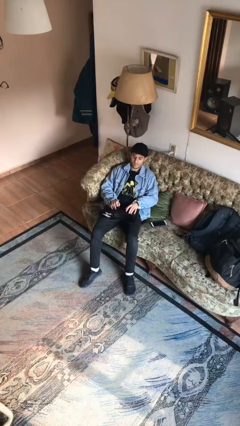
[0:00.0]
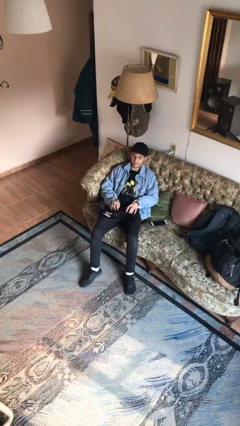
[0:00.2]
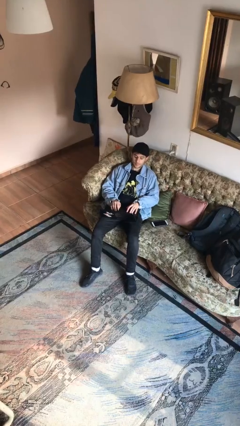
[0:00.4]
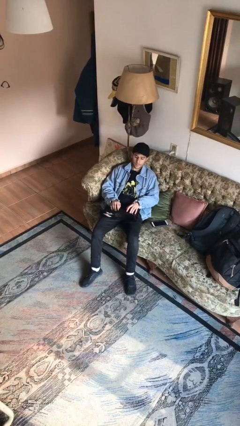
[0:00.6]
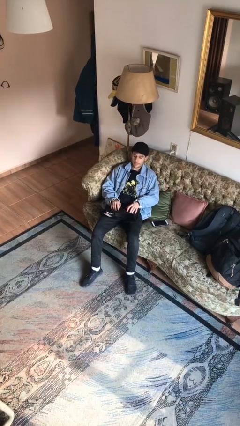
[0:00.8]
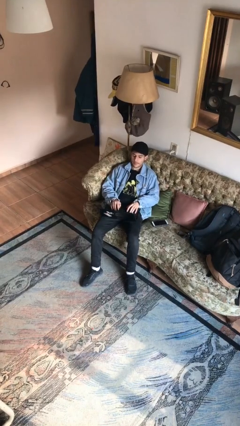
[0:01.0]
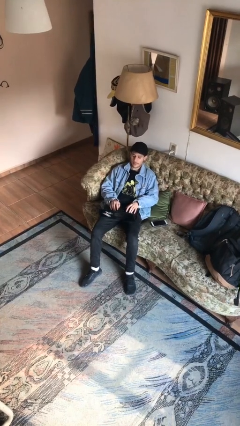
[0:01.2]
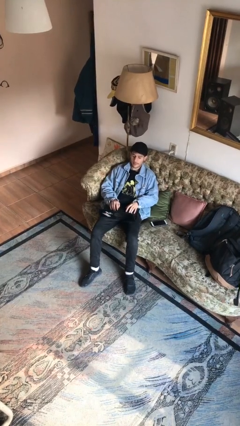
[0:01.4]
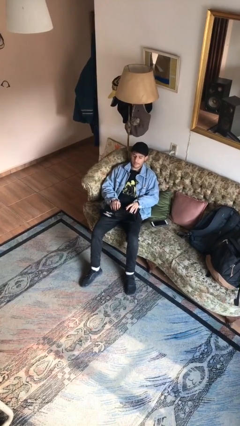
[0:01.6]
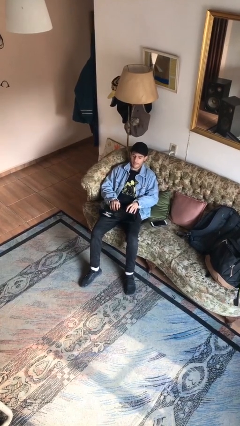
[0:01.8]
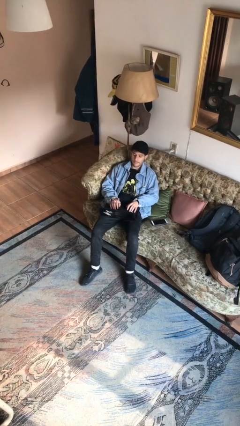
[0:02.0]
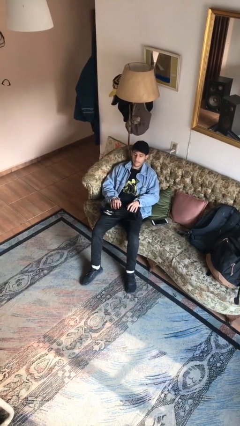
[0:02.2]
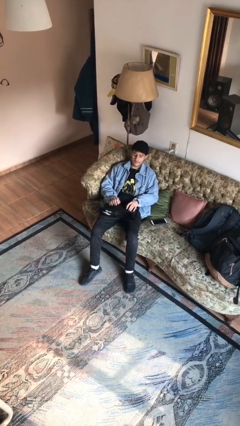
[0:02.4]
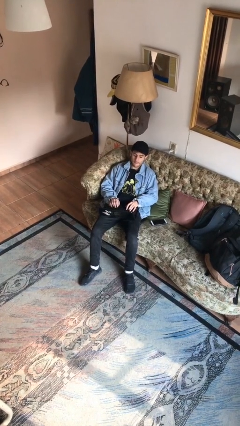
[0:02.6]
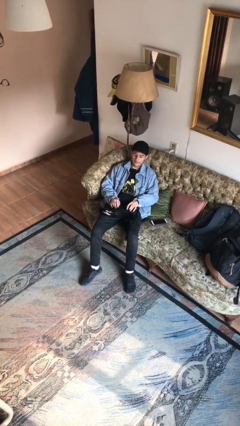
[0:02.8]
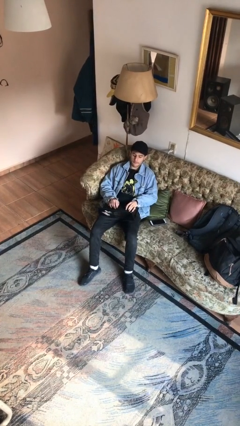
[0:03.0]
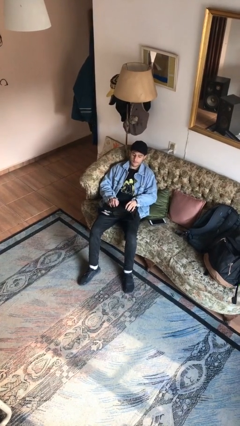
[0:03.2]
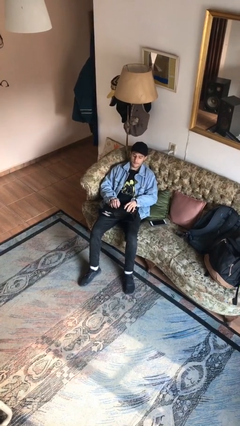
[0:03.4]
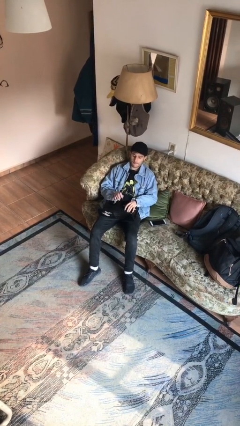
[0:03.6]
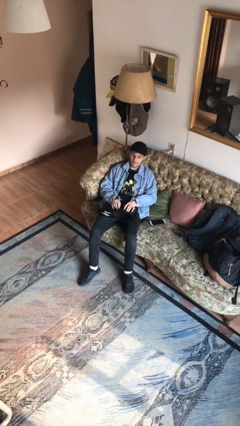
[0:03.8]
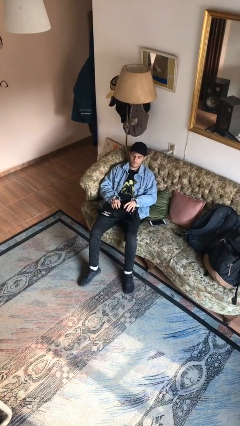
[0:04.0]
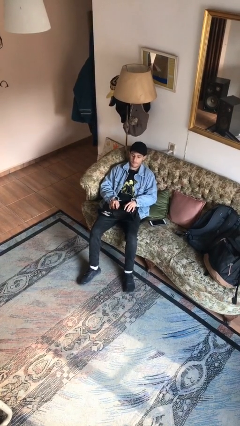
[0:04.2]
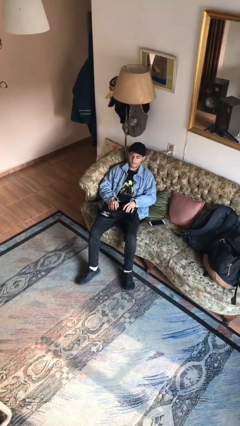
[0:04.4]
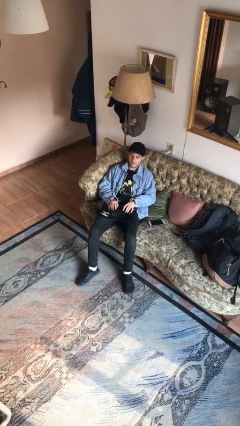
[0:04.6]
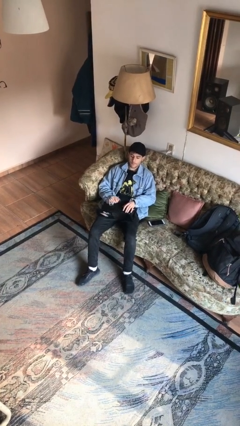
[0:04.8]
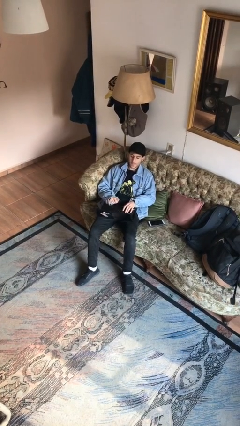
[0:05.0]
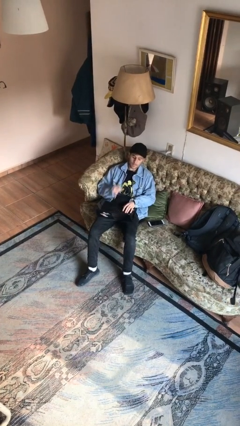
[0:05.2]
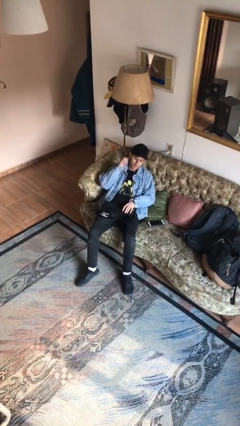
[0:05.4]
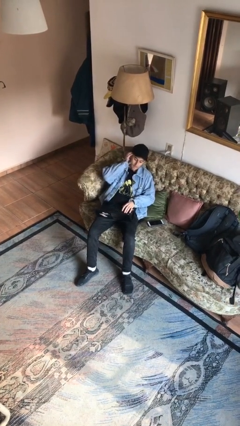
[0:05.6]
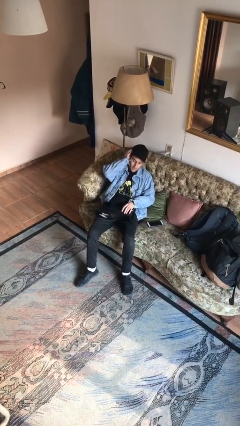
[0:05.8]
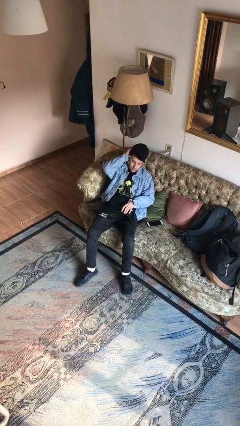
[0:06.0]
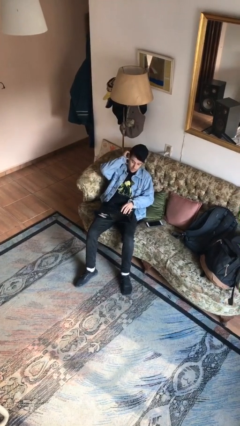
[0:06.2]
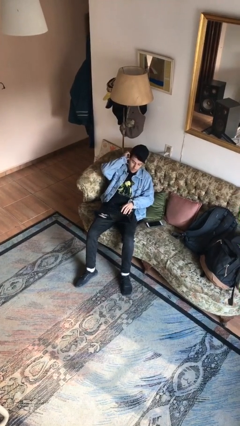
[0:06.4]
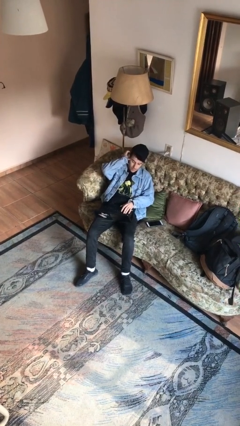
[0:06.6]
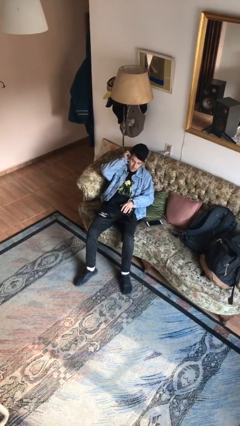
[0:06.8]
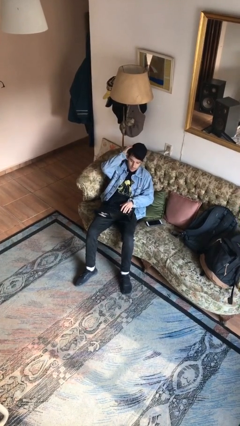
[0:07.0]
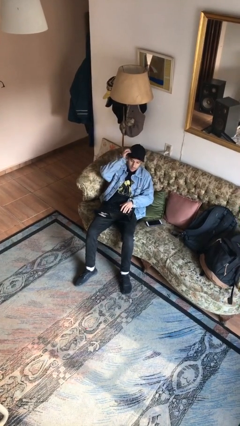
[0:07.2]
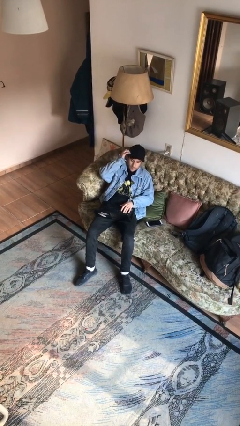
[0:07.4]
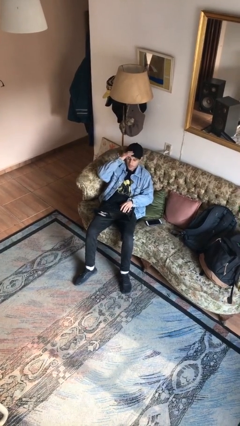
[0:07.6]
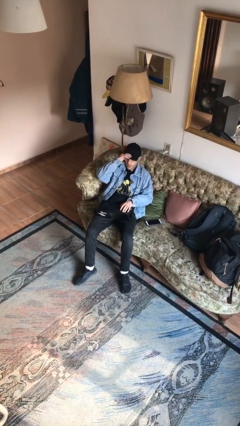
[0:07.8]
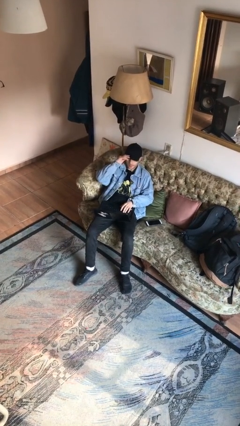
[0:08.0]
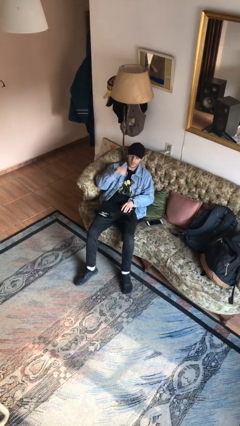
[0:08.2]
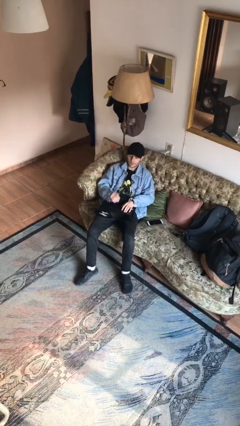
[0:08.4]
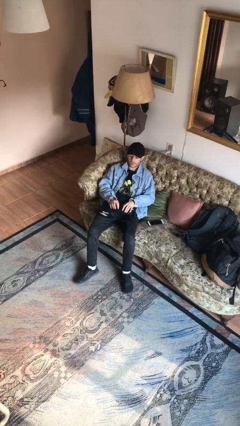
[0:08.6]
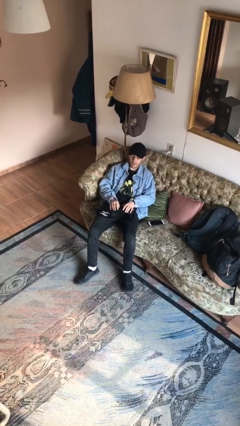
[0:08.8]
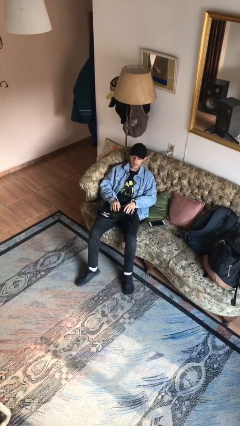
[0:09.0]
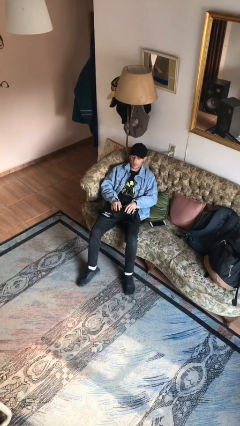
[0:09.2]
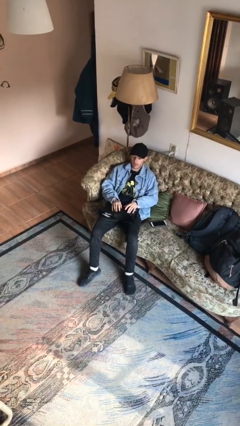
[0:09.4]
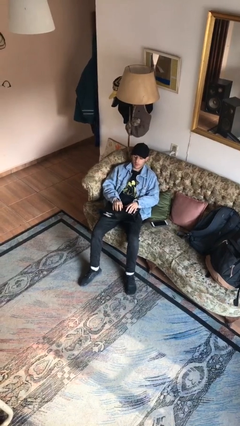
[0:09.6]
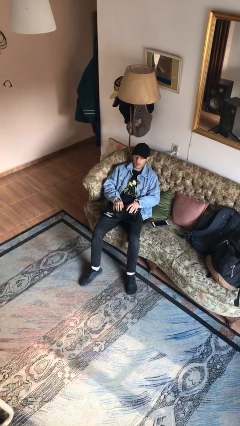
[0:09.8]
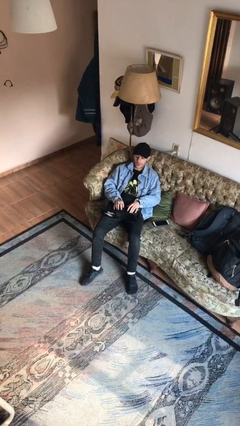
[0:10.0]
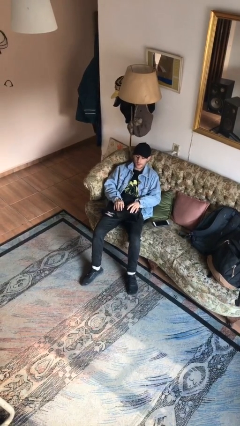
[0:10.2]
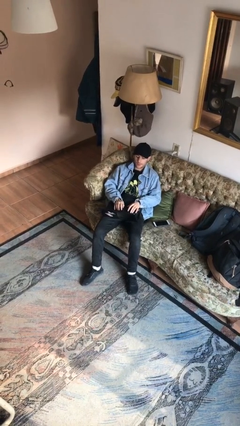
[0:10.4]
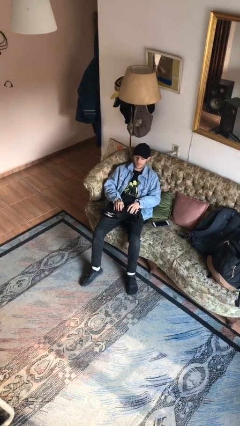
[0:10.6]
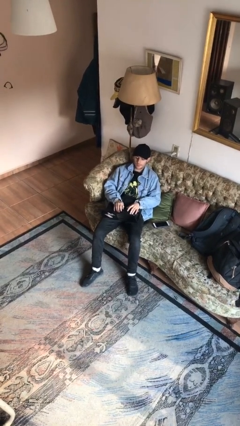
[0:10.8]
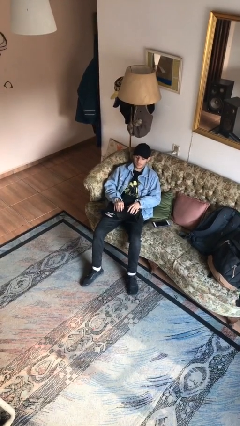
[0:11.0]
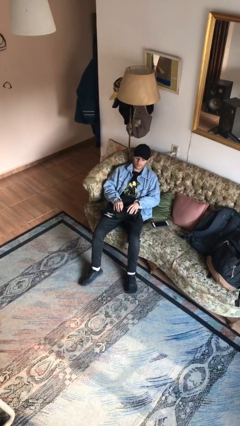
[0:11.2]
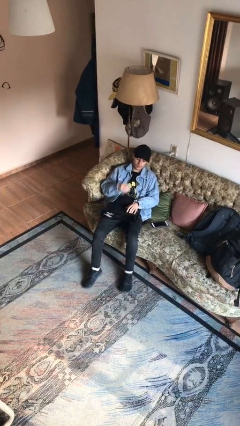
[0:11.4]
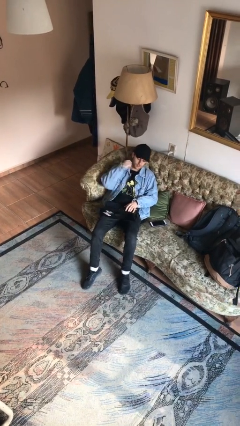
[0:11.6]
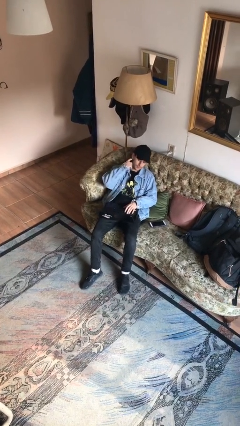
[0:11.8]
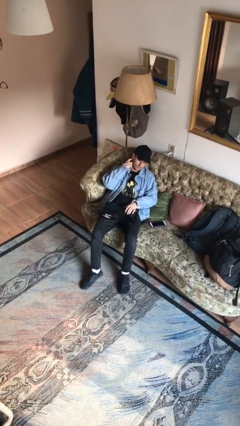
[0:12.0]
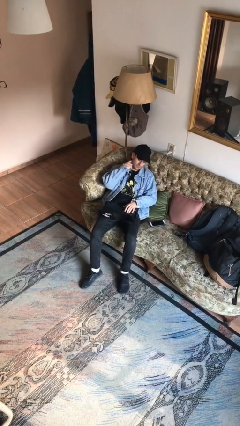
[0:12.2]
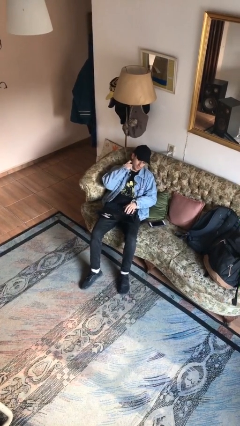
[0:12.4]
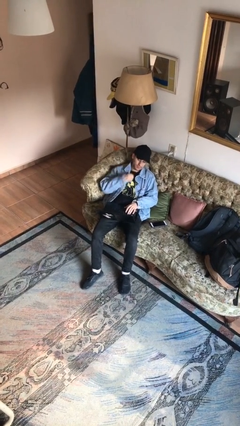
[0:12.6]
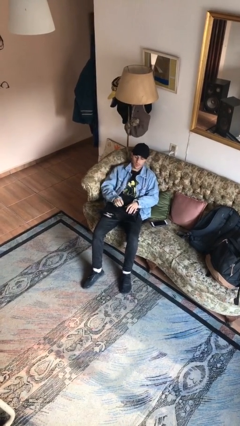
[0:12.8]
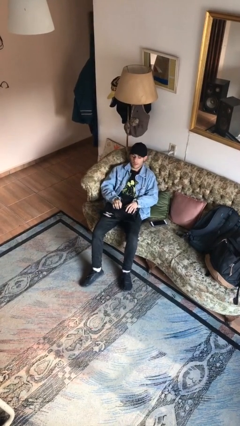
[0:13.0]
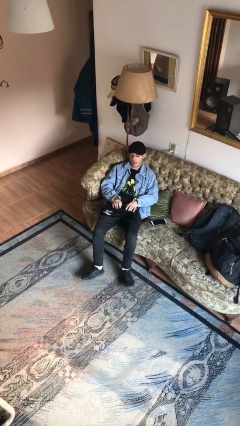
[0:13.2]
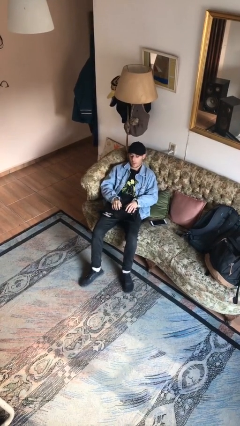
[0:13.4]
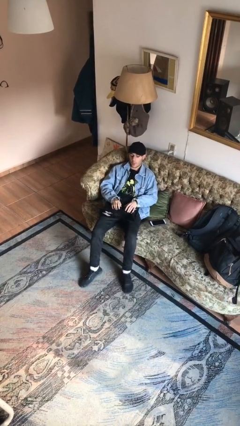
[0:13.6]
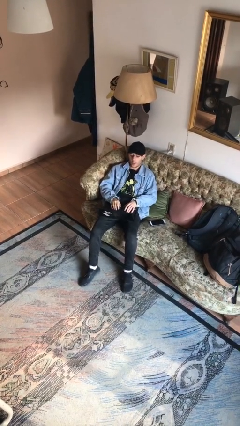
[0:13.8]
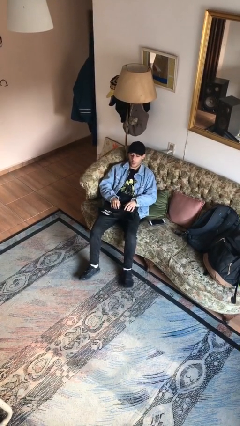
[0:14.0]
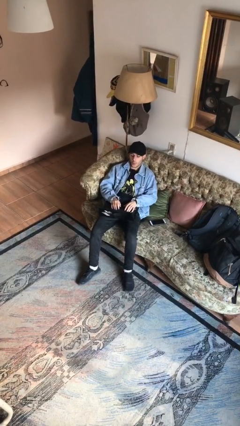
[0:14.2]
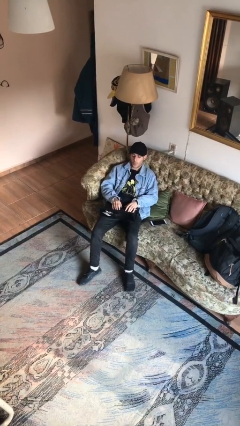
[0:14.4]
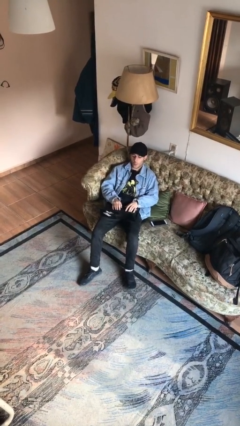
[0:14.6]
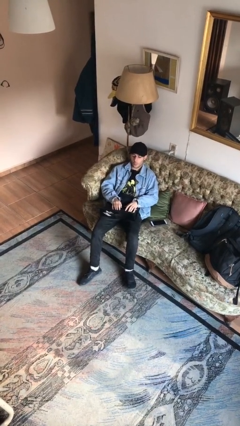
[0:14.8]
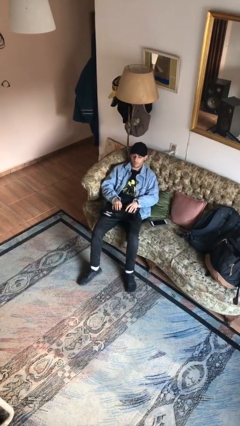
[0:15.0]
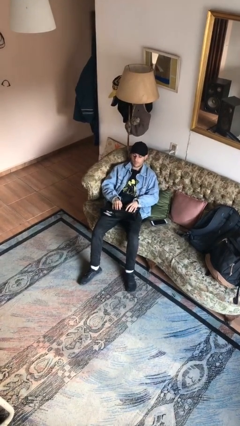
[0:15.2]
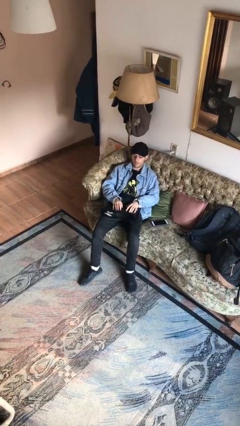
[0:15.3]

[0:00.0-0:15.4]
person interacts with laptop

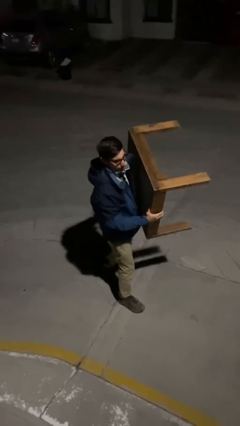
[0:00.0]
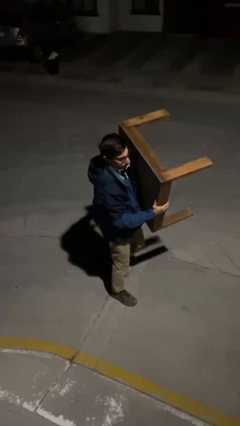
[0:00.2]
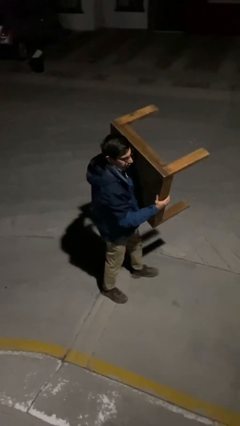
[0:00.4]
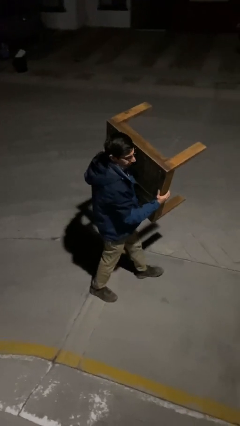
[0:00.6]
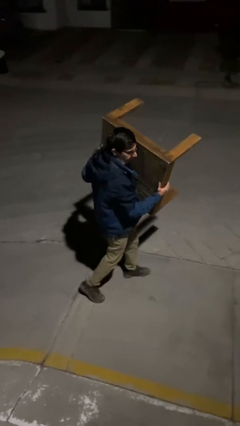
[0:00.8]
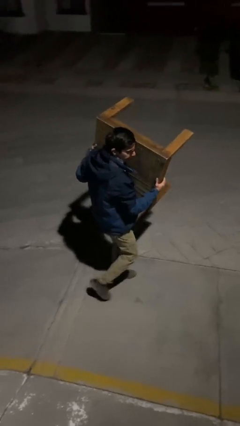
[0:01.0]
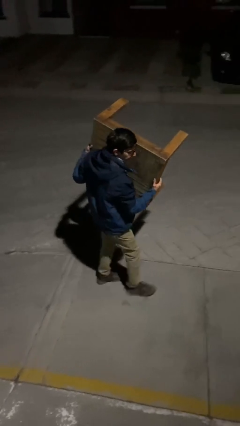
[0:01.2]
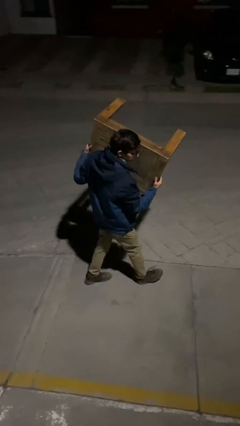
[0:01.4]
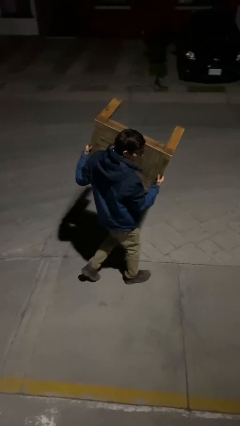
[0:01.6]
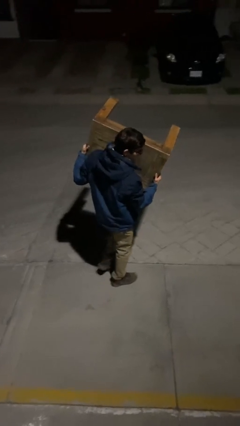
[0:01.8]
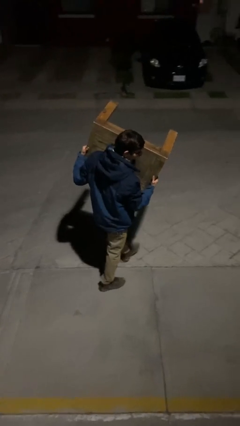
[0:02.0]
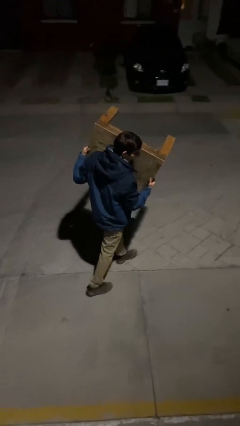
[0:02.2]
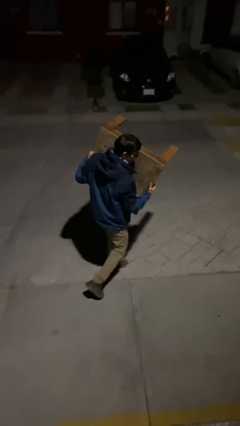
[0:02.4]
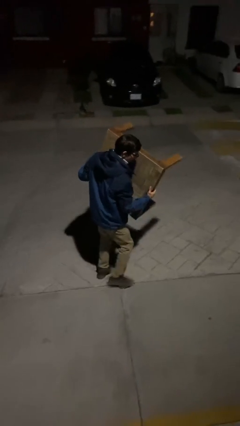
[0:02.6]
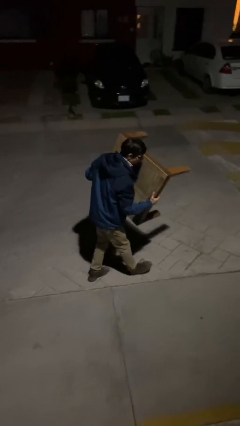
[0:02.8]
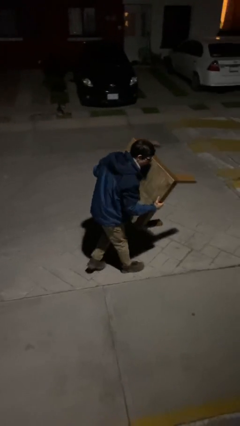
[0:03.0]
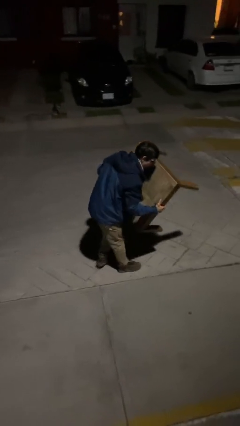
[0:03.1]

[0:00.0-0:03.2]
person carries heavy object
